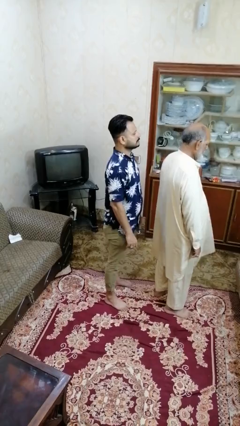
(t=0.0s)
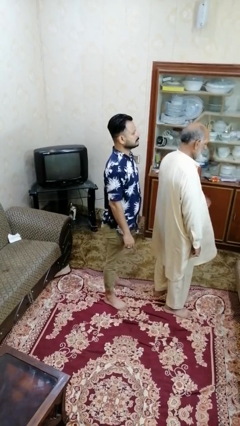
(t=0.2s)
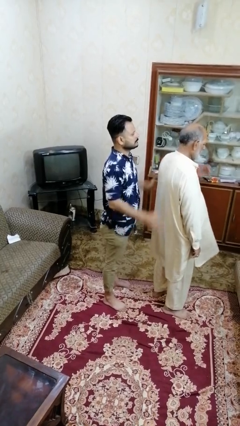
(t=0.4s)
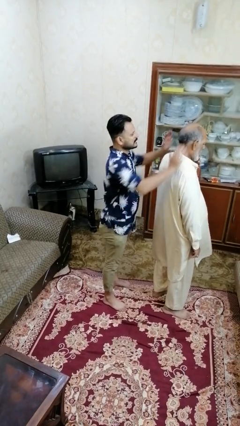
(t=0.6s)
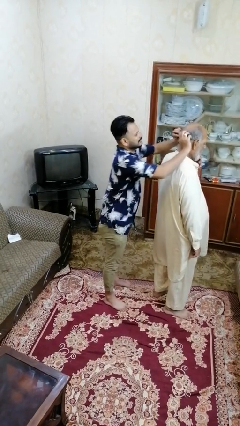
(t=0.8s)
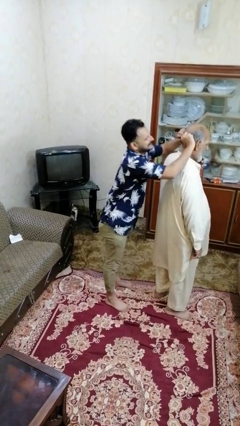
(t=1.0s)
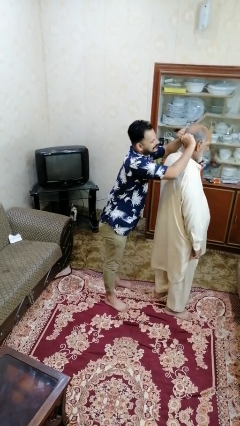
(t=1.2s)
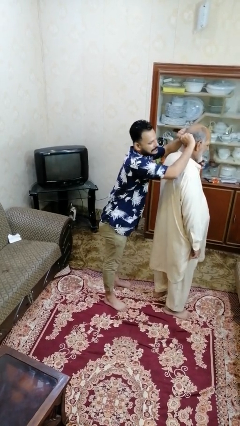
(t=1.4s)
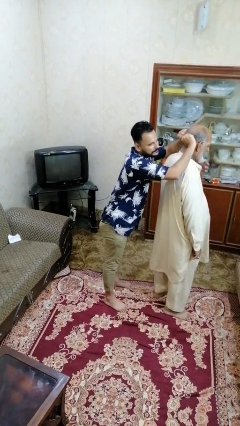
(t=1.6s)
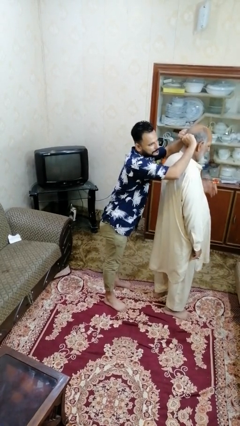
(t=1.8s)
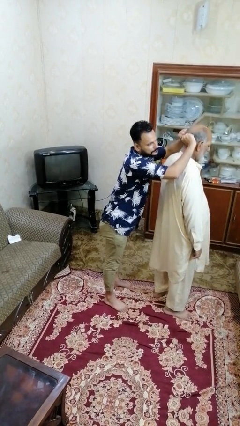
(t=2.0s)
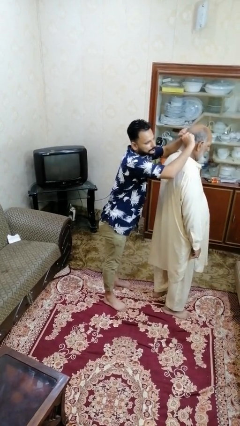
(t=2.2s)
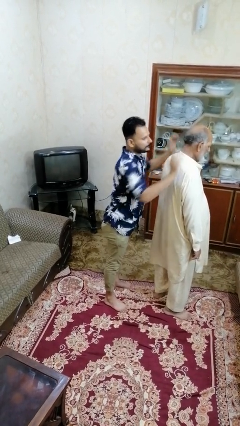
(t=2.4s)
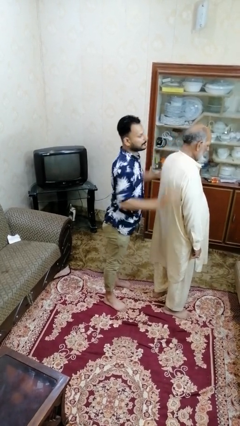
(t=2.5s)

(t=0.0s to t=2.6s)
person grabs person by hair

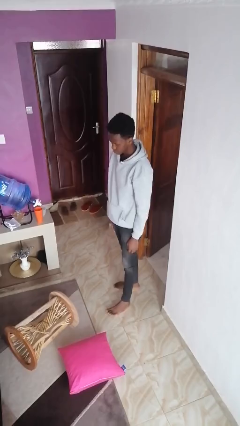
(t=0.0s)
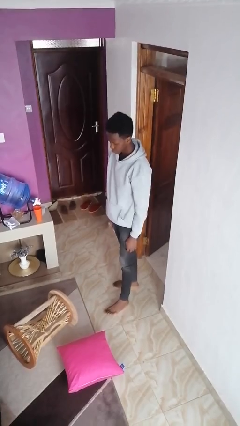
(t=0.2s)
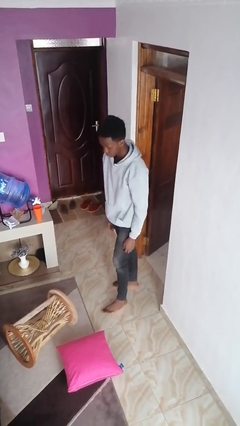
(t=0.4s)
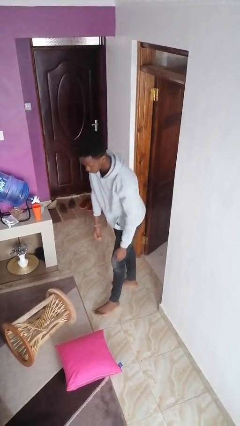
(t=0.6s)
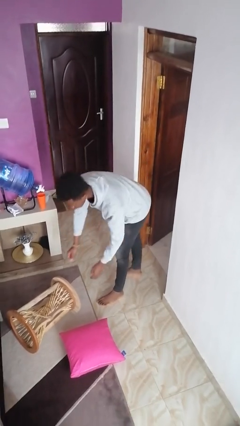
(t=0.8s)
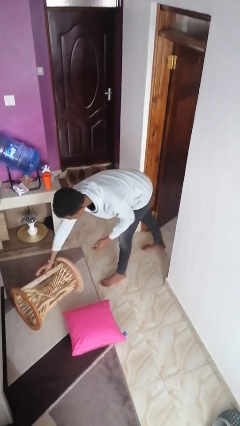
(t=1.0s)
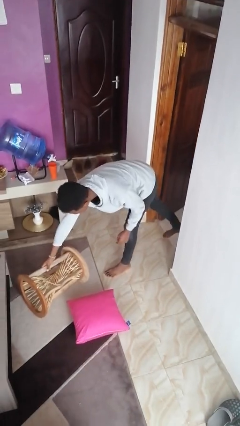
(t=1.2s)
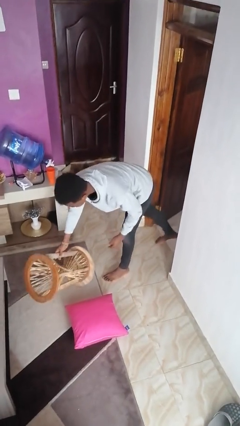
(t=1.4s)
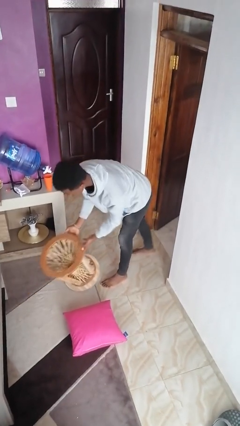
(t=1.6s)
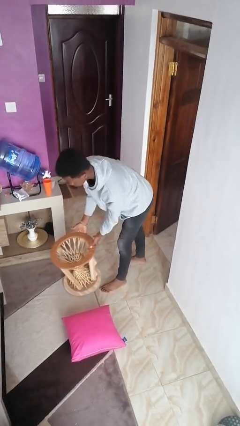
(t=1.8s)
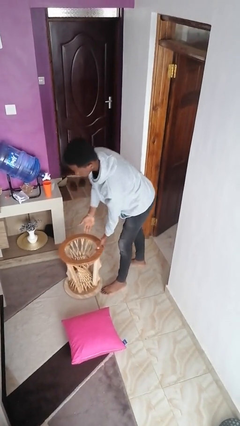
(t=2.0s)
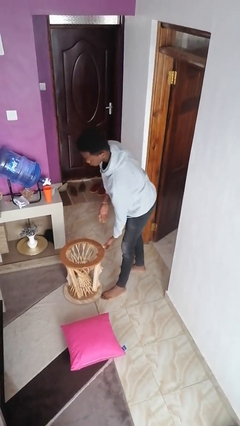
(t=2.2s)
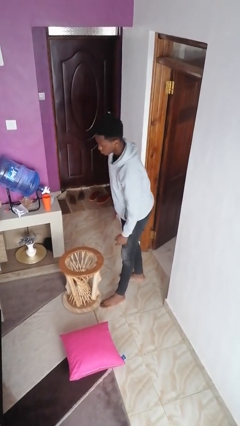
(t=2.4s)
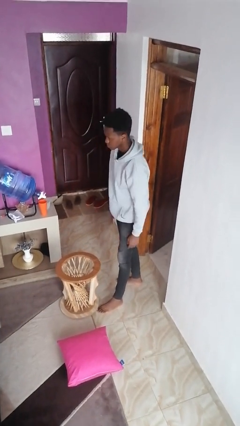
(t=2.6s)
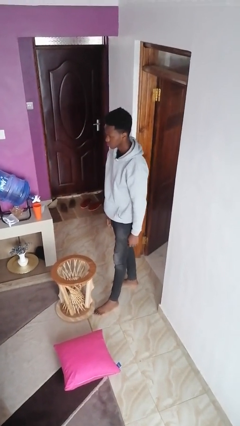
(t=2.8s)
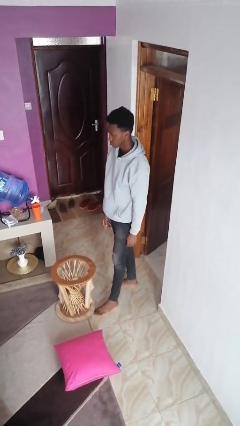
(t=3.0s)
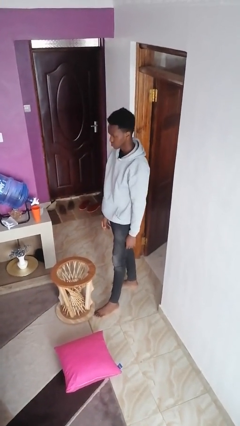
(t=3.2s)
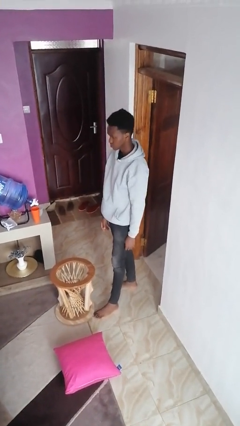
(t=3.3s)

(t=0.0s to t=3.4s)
person sets upright furniture

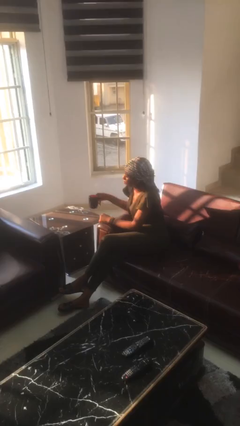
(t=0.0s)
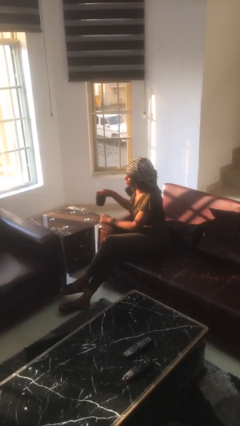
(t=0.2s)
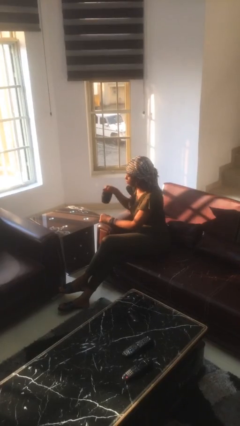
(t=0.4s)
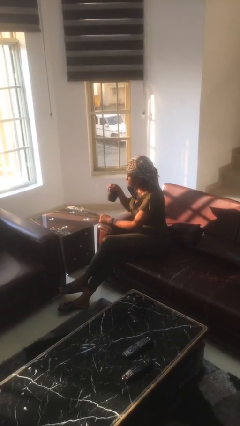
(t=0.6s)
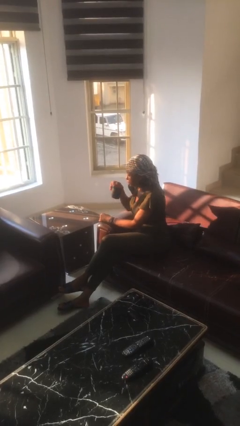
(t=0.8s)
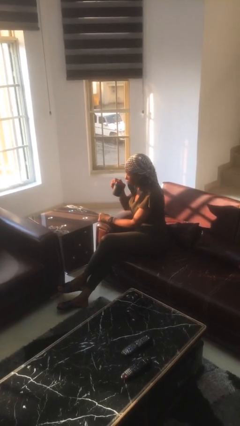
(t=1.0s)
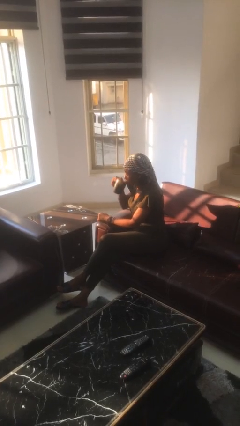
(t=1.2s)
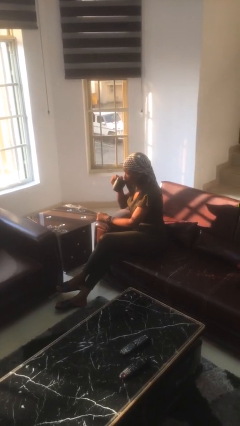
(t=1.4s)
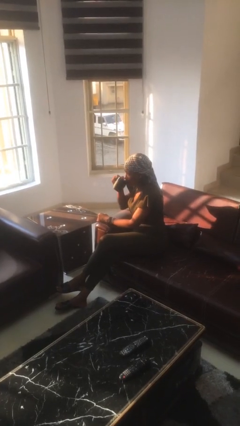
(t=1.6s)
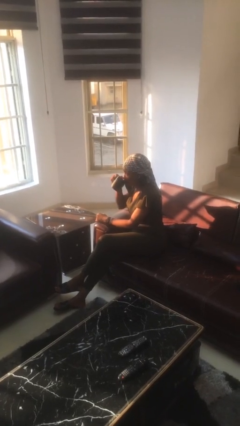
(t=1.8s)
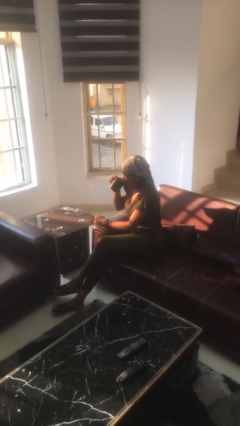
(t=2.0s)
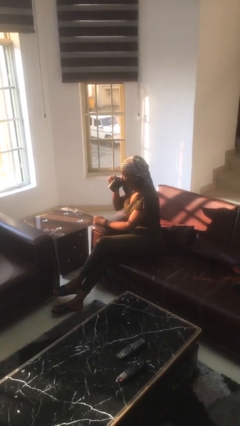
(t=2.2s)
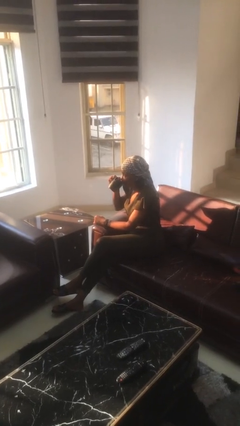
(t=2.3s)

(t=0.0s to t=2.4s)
person drinks from mug

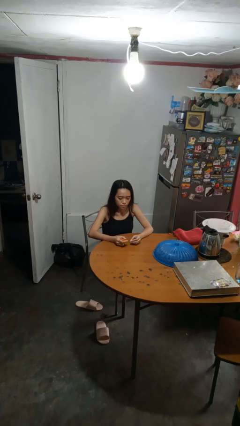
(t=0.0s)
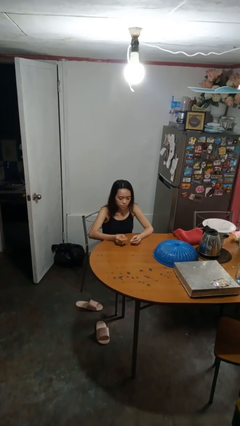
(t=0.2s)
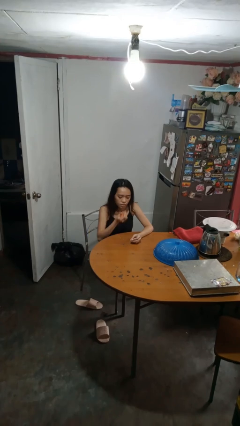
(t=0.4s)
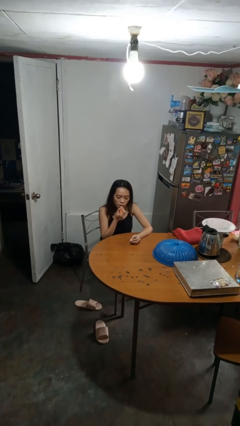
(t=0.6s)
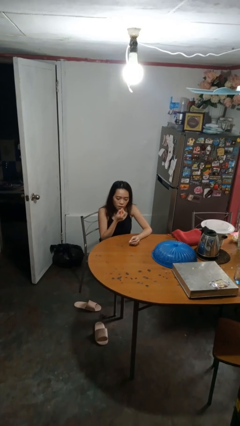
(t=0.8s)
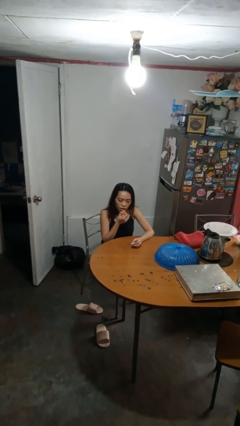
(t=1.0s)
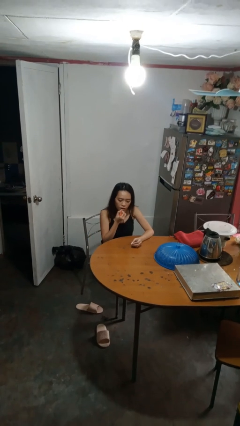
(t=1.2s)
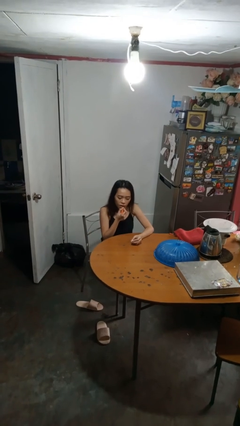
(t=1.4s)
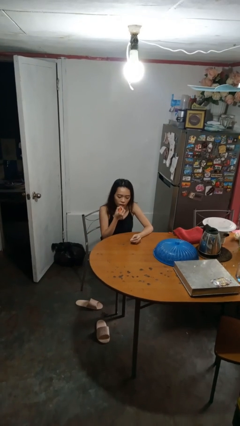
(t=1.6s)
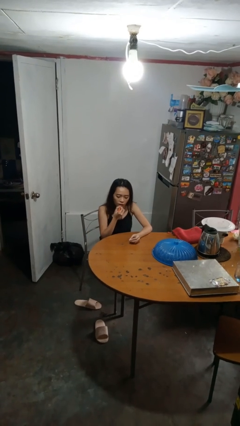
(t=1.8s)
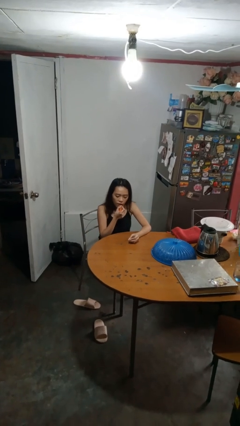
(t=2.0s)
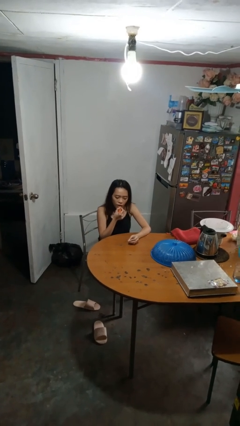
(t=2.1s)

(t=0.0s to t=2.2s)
person applies lip makeup

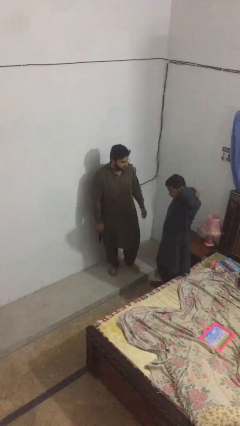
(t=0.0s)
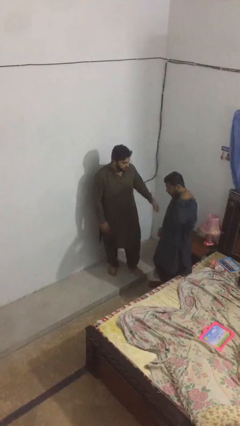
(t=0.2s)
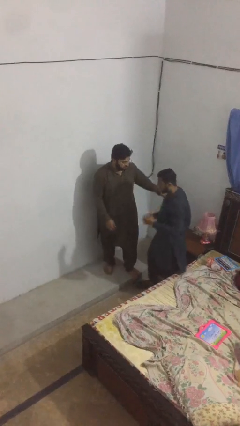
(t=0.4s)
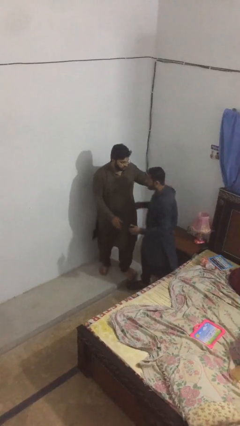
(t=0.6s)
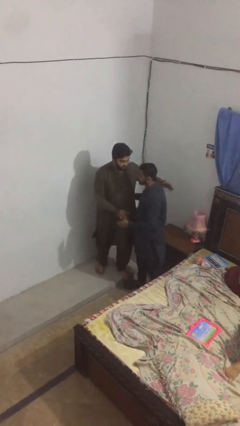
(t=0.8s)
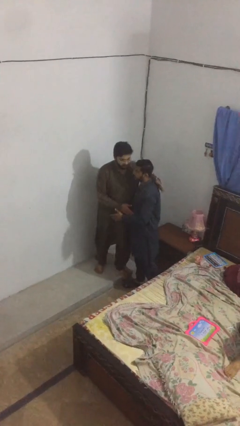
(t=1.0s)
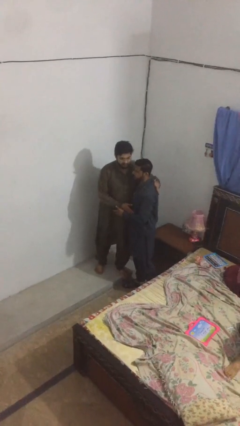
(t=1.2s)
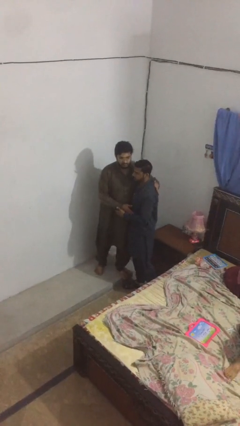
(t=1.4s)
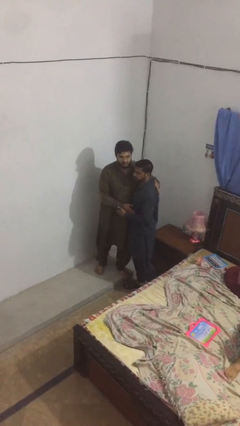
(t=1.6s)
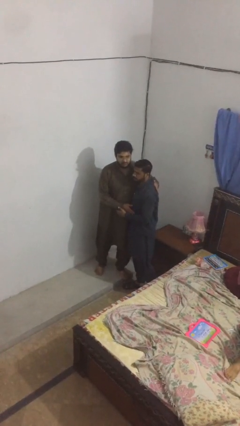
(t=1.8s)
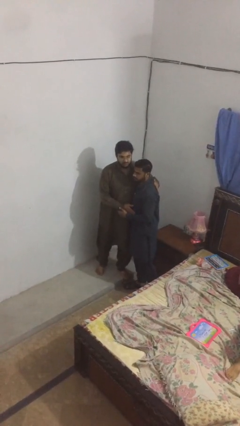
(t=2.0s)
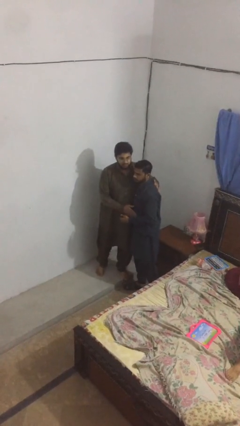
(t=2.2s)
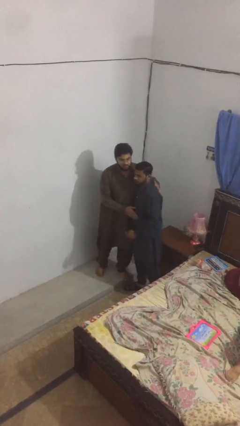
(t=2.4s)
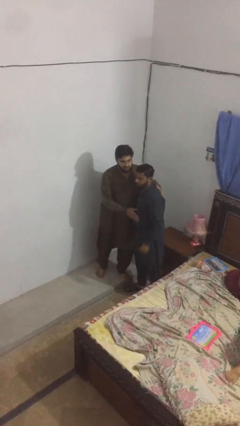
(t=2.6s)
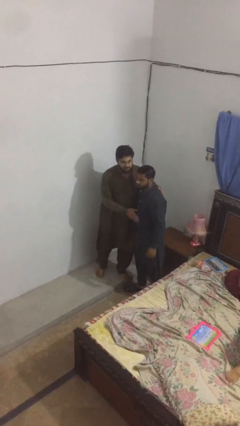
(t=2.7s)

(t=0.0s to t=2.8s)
person embraces person

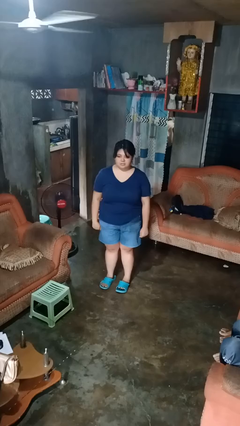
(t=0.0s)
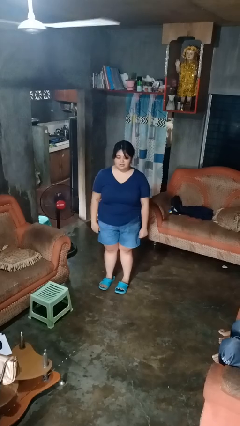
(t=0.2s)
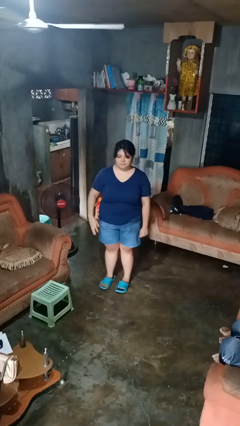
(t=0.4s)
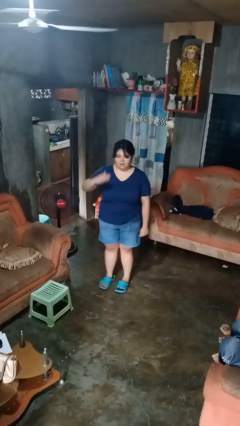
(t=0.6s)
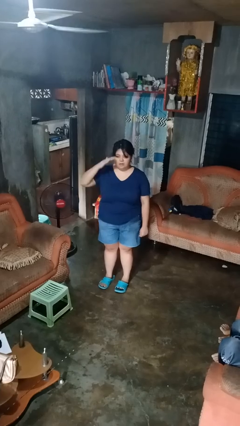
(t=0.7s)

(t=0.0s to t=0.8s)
person salutes

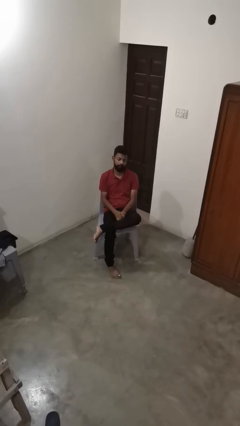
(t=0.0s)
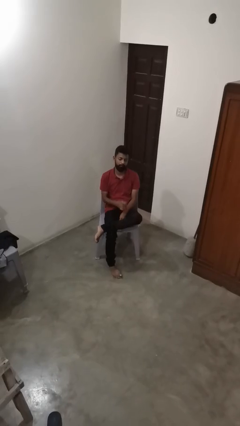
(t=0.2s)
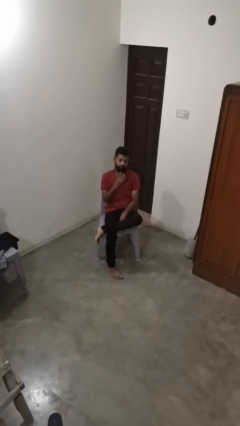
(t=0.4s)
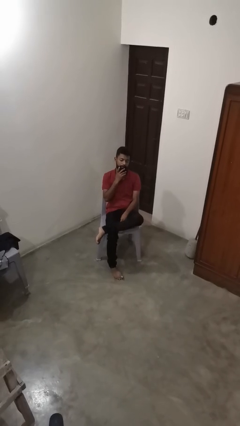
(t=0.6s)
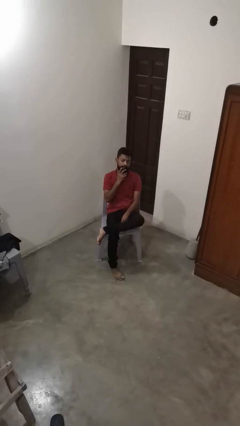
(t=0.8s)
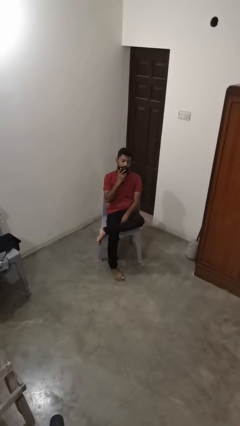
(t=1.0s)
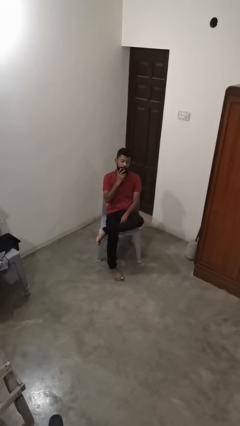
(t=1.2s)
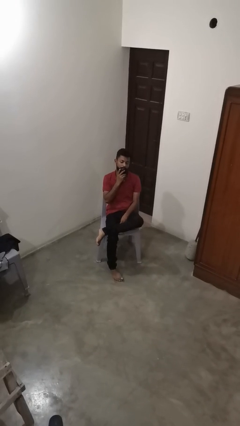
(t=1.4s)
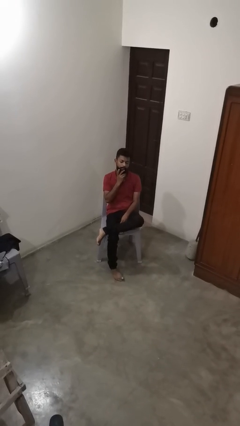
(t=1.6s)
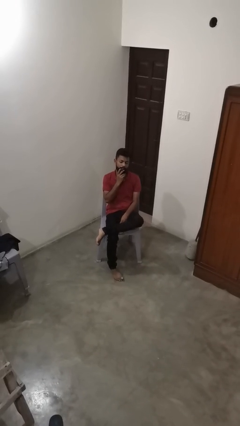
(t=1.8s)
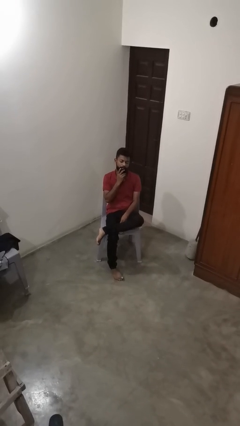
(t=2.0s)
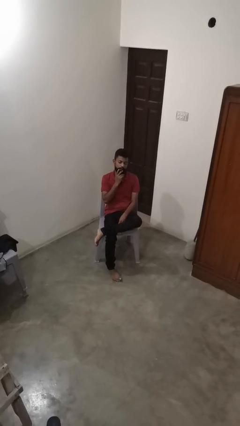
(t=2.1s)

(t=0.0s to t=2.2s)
person strokes chin

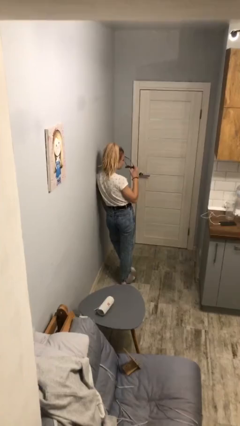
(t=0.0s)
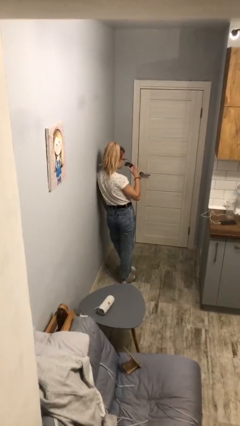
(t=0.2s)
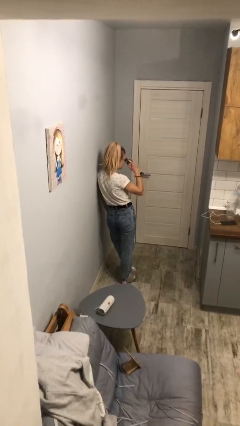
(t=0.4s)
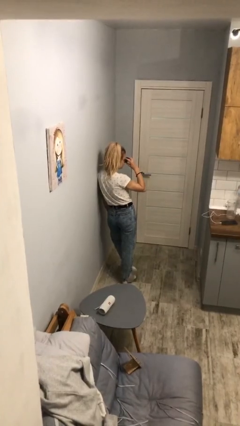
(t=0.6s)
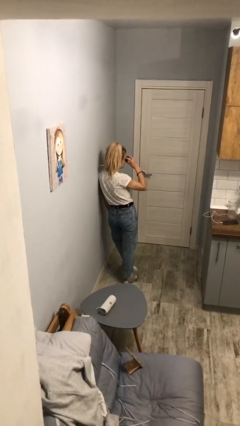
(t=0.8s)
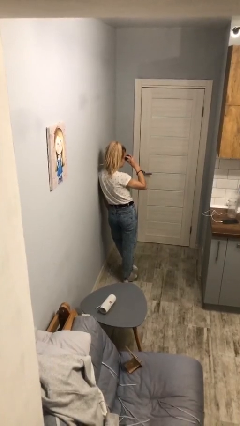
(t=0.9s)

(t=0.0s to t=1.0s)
person puts on glasses
